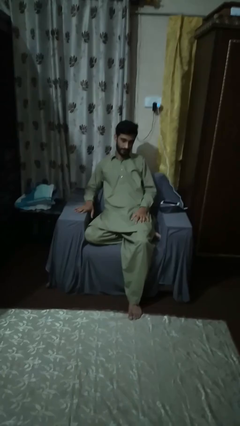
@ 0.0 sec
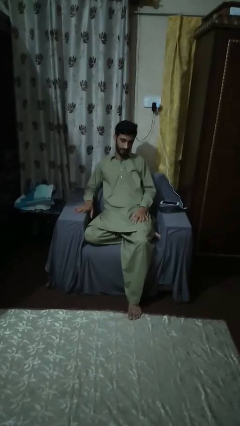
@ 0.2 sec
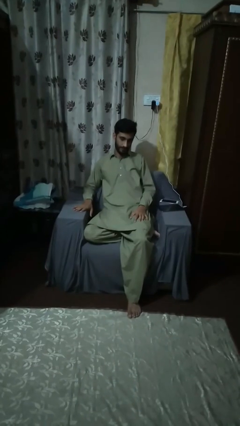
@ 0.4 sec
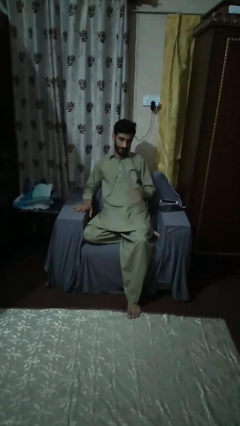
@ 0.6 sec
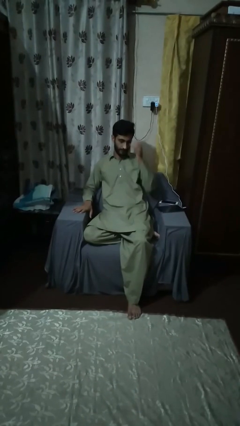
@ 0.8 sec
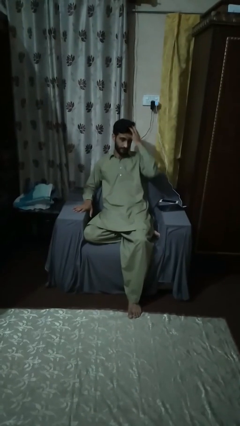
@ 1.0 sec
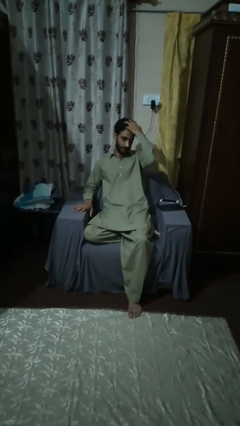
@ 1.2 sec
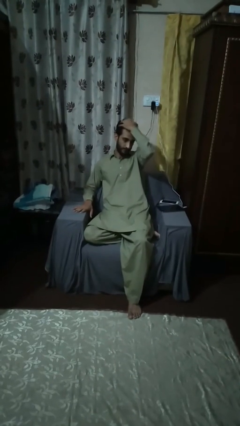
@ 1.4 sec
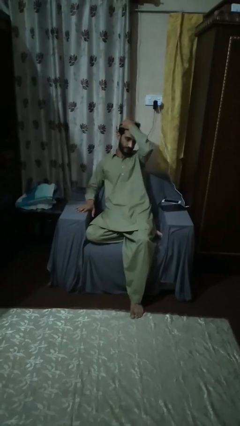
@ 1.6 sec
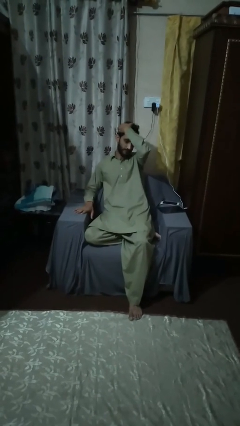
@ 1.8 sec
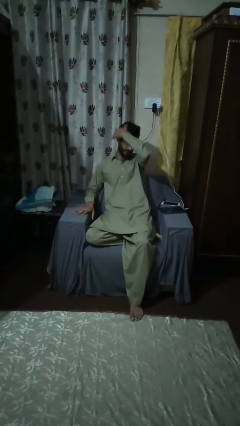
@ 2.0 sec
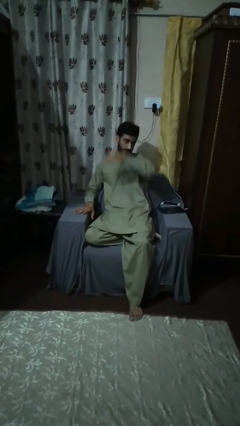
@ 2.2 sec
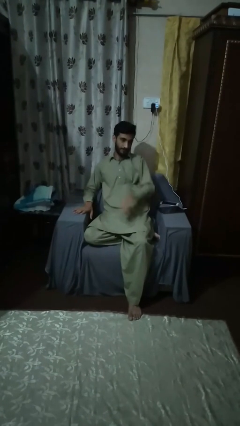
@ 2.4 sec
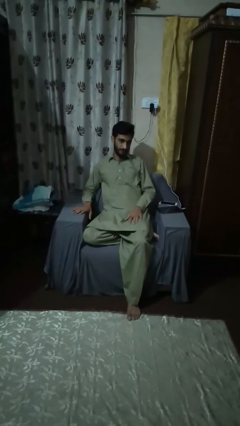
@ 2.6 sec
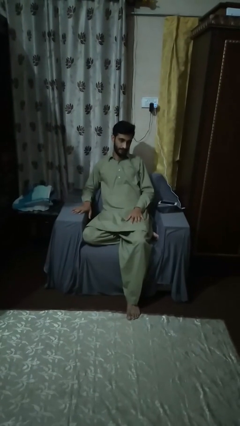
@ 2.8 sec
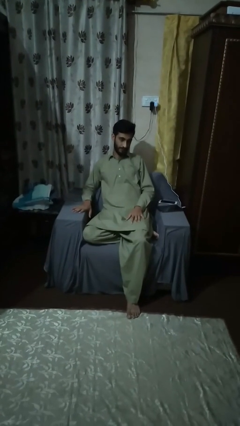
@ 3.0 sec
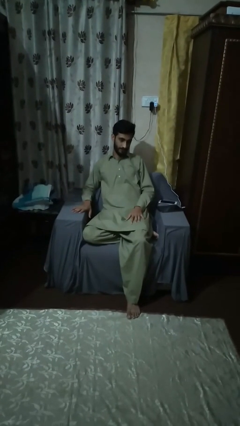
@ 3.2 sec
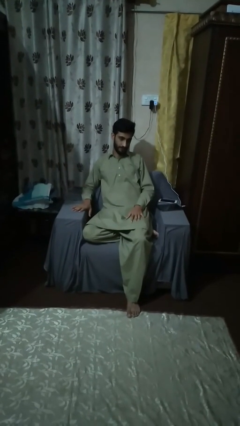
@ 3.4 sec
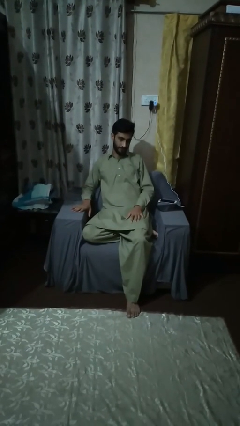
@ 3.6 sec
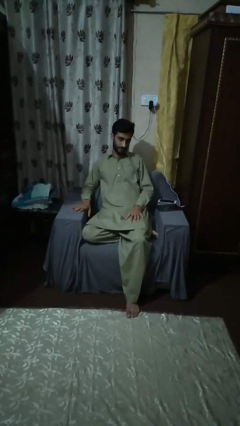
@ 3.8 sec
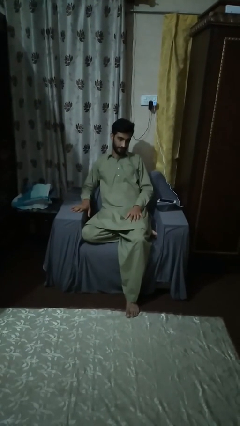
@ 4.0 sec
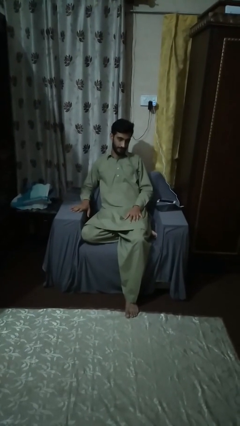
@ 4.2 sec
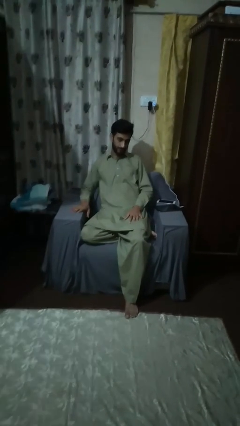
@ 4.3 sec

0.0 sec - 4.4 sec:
person strokes hair

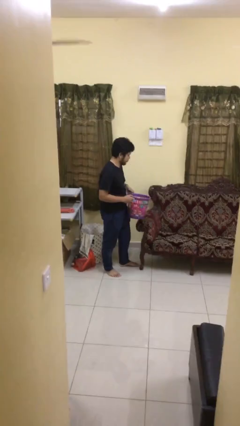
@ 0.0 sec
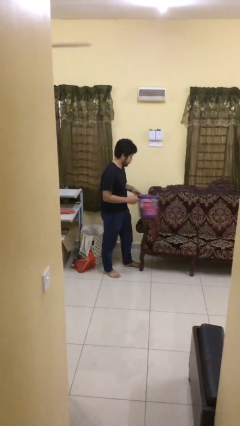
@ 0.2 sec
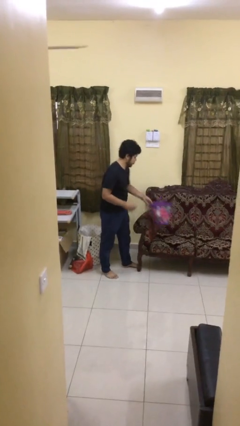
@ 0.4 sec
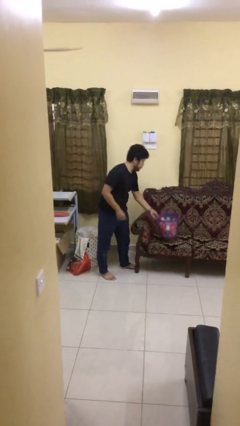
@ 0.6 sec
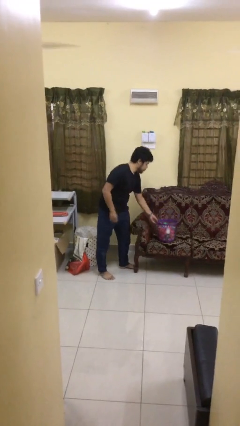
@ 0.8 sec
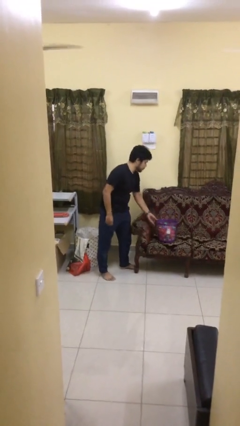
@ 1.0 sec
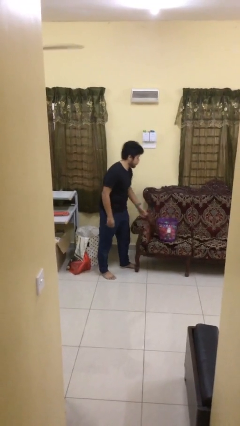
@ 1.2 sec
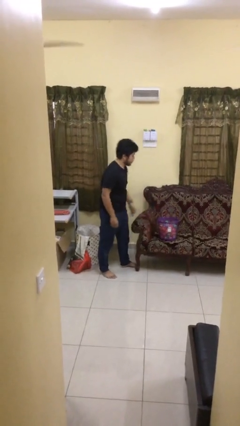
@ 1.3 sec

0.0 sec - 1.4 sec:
person puts down object on couch

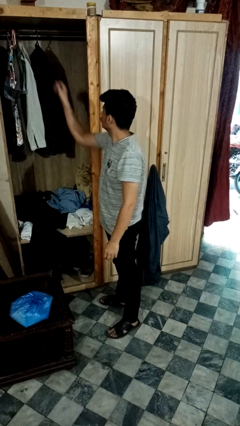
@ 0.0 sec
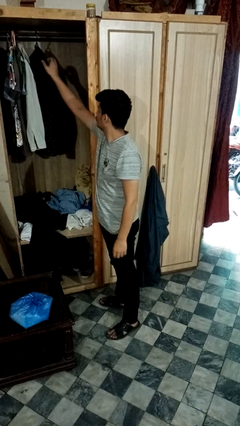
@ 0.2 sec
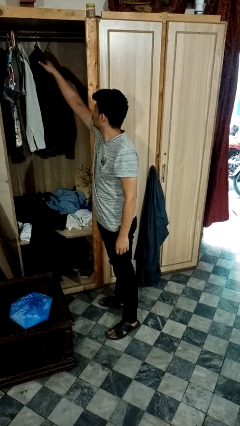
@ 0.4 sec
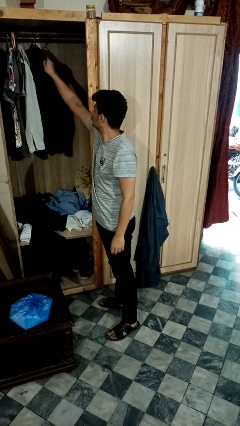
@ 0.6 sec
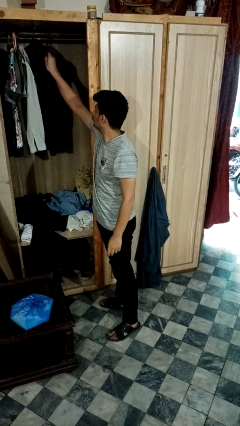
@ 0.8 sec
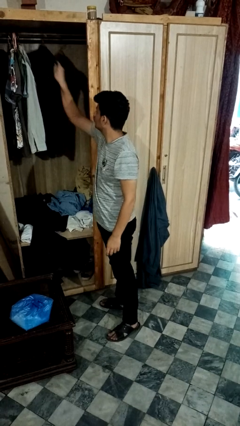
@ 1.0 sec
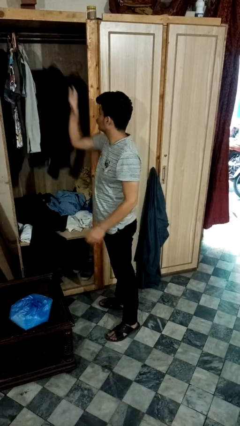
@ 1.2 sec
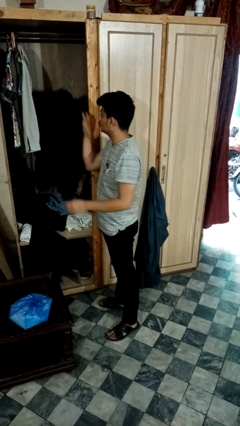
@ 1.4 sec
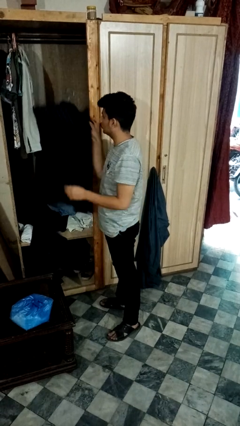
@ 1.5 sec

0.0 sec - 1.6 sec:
person takes clothes from closet

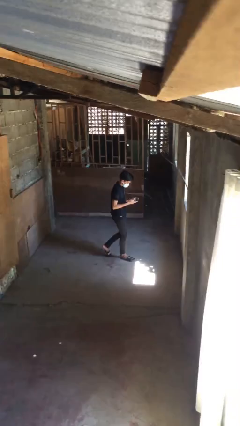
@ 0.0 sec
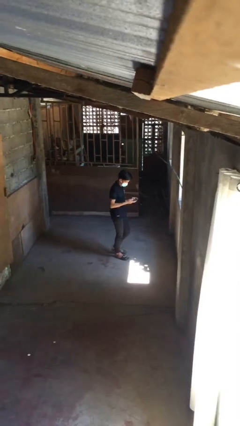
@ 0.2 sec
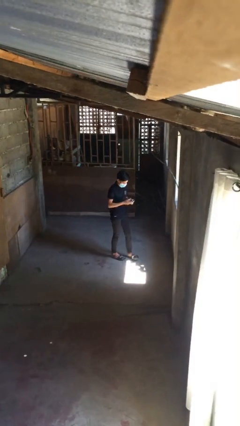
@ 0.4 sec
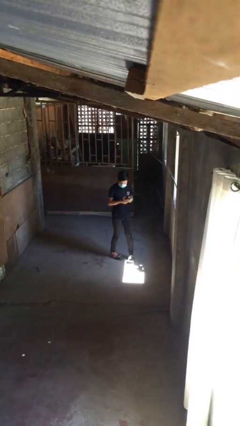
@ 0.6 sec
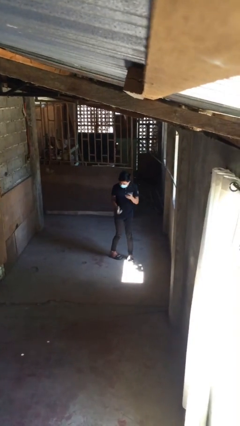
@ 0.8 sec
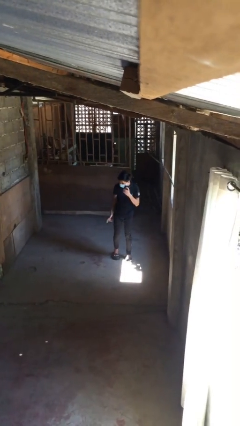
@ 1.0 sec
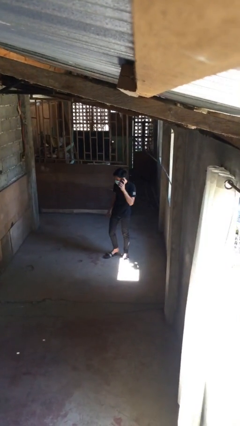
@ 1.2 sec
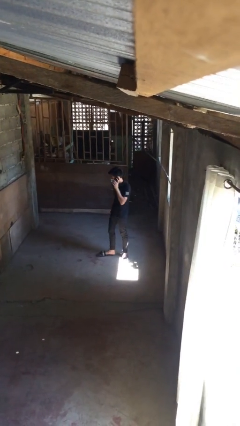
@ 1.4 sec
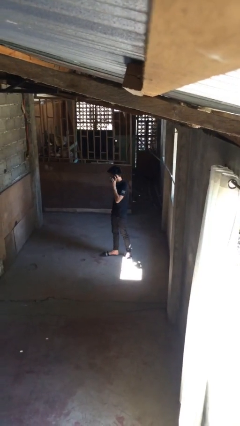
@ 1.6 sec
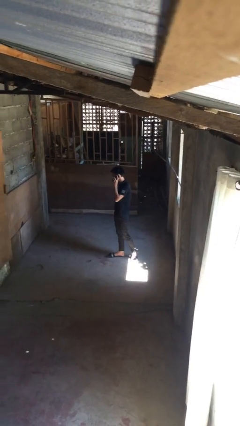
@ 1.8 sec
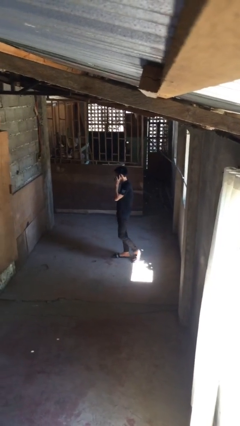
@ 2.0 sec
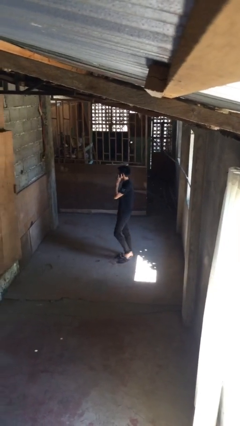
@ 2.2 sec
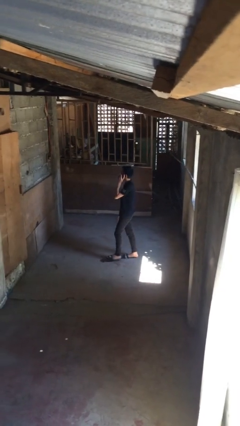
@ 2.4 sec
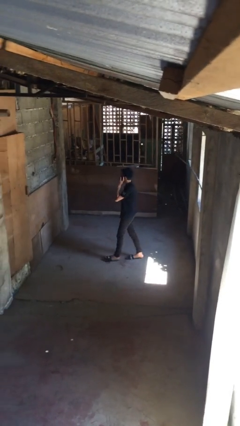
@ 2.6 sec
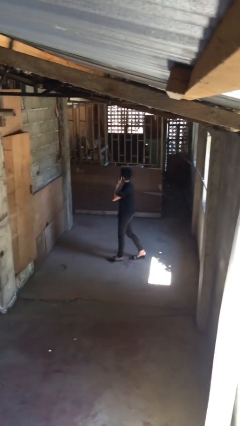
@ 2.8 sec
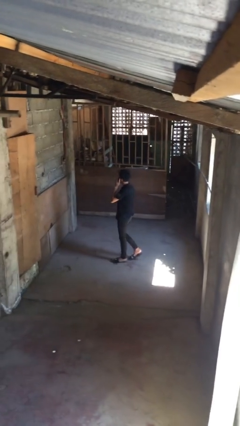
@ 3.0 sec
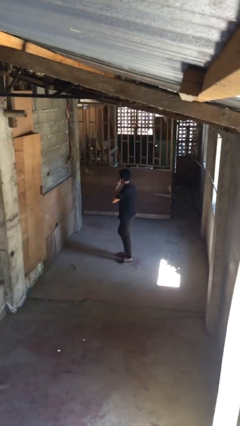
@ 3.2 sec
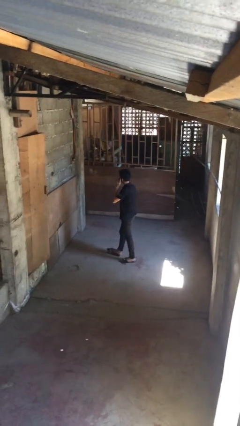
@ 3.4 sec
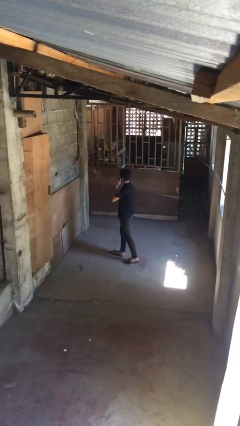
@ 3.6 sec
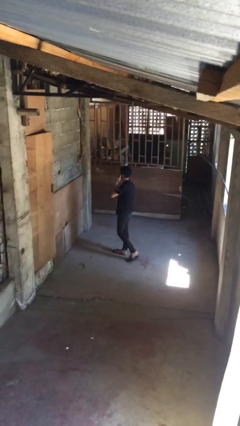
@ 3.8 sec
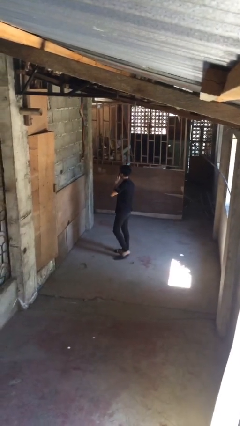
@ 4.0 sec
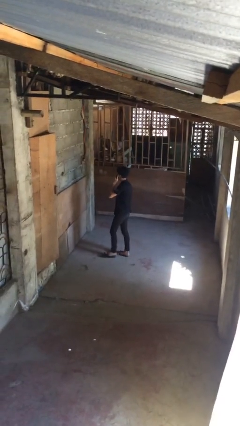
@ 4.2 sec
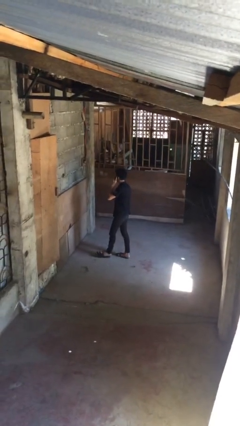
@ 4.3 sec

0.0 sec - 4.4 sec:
person talks on phone

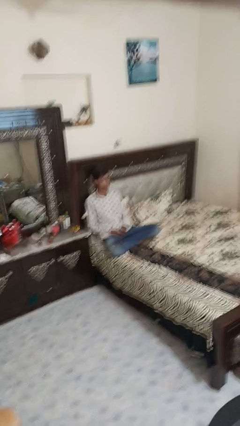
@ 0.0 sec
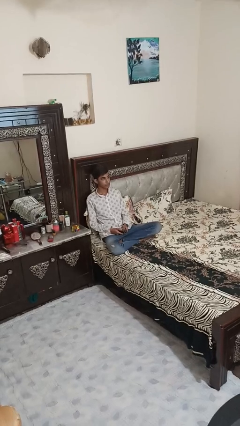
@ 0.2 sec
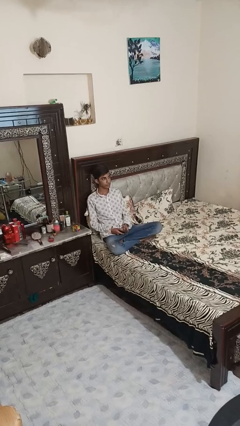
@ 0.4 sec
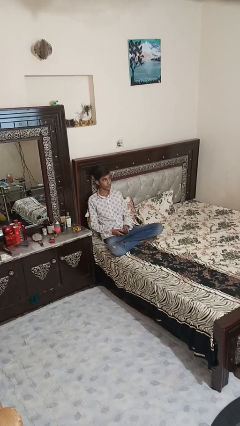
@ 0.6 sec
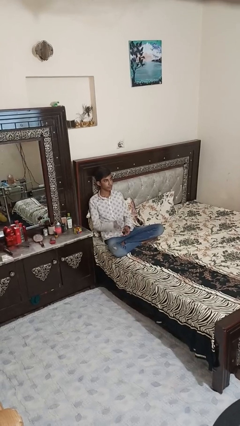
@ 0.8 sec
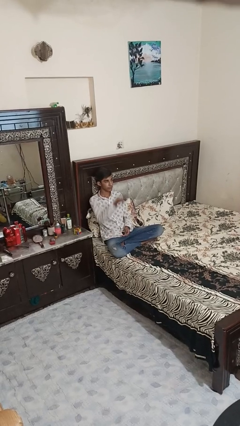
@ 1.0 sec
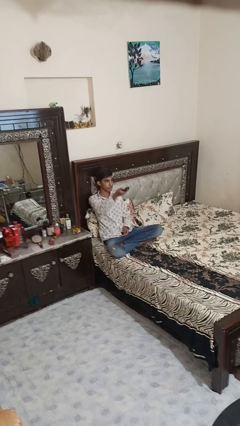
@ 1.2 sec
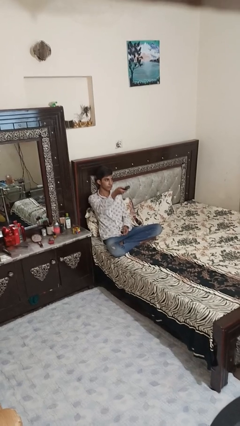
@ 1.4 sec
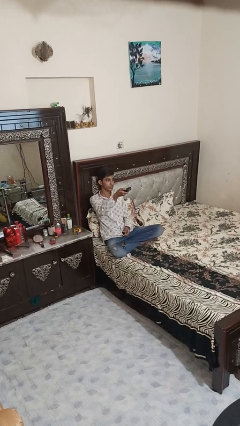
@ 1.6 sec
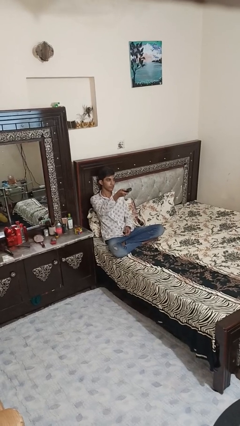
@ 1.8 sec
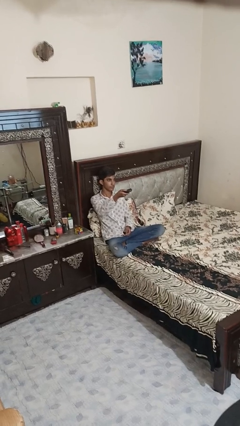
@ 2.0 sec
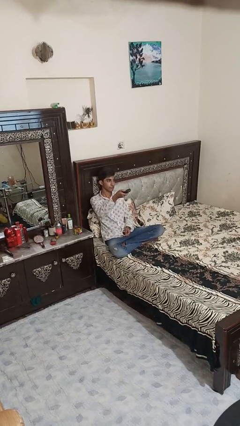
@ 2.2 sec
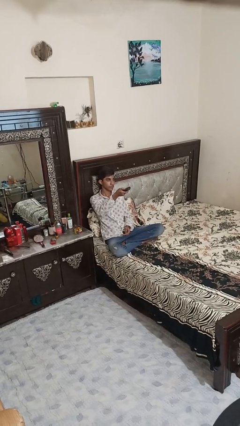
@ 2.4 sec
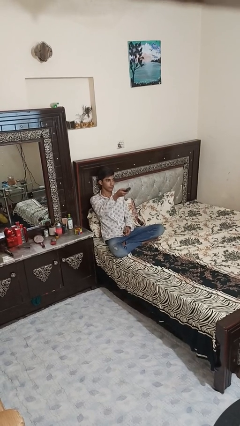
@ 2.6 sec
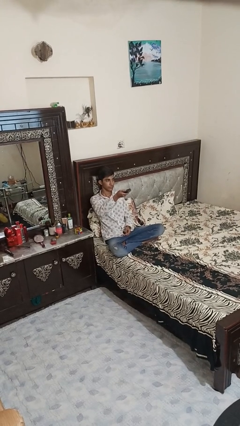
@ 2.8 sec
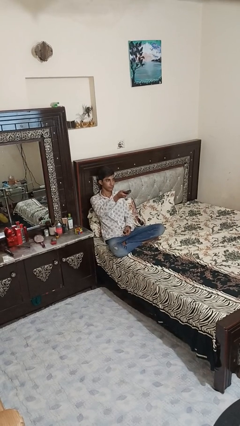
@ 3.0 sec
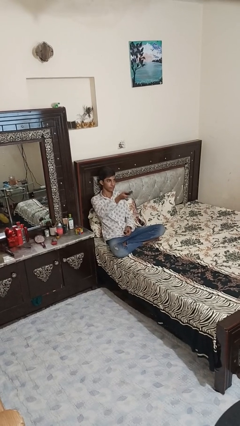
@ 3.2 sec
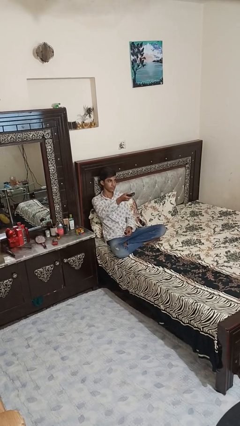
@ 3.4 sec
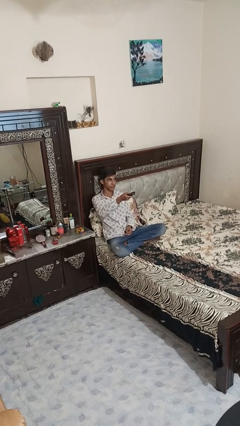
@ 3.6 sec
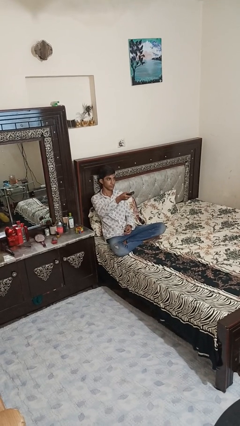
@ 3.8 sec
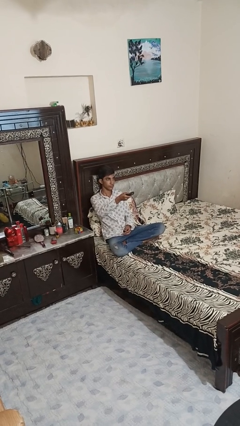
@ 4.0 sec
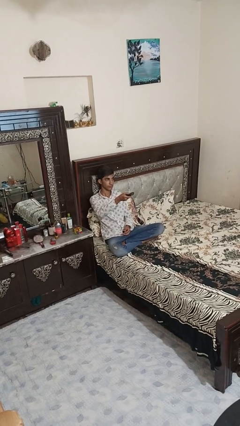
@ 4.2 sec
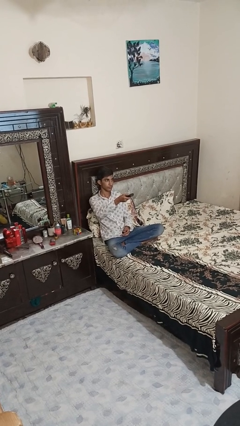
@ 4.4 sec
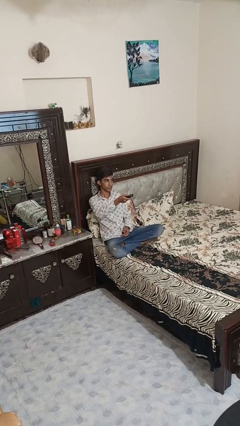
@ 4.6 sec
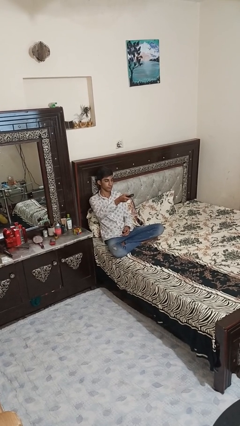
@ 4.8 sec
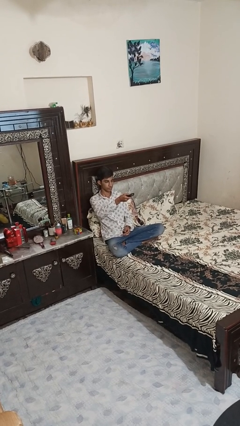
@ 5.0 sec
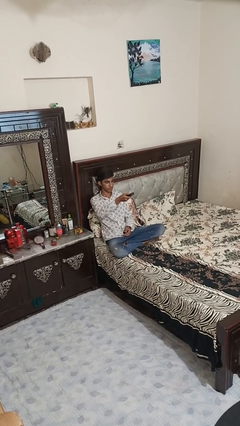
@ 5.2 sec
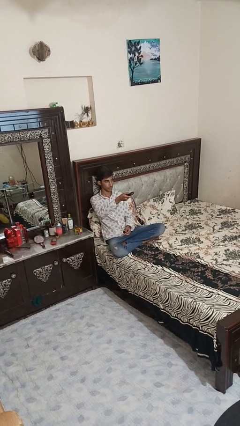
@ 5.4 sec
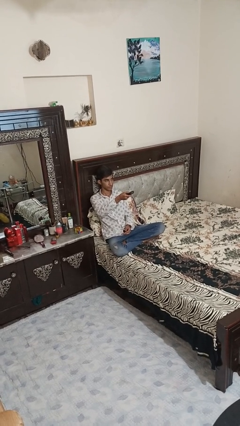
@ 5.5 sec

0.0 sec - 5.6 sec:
person uses television remote
